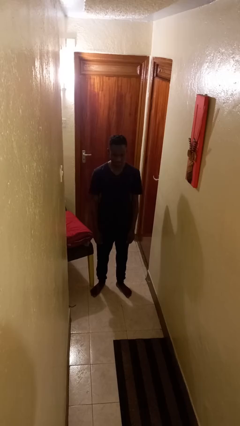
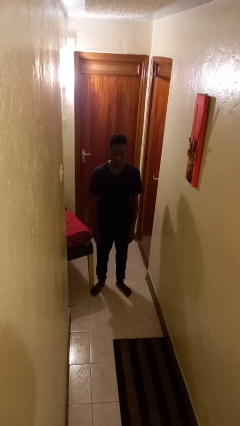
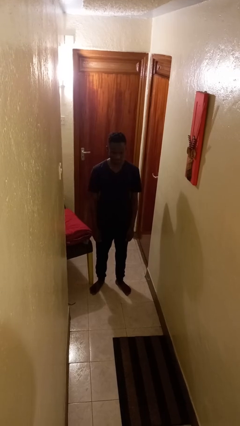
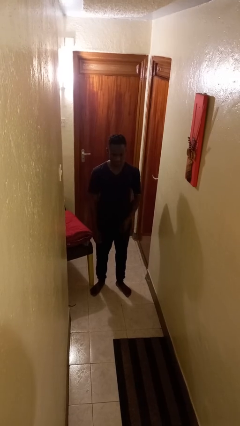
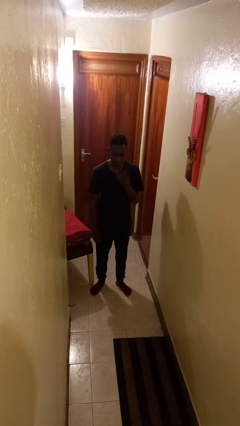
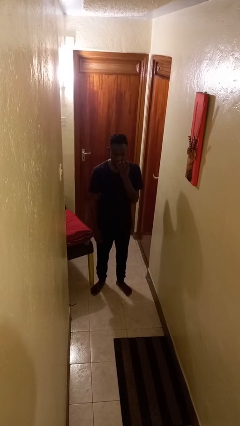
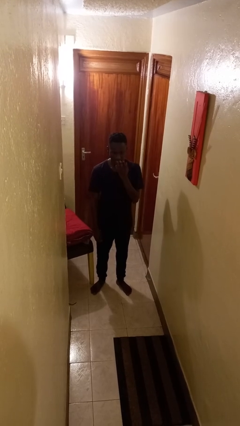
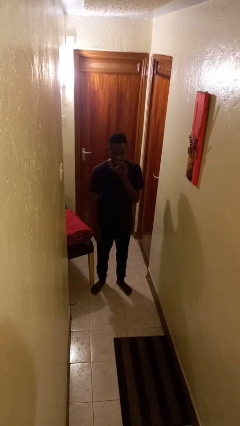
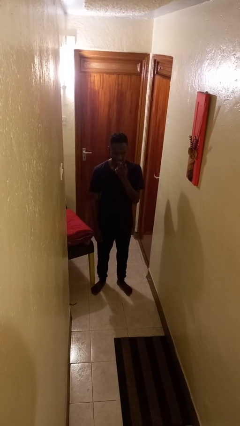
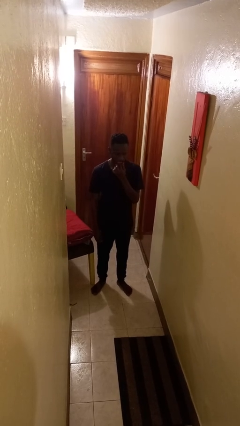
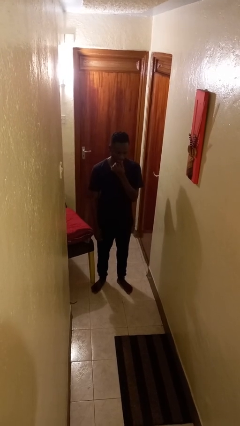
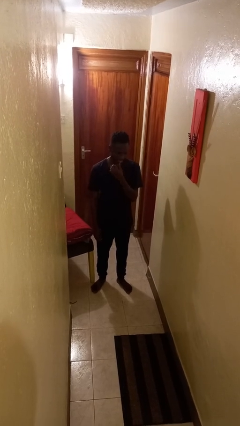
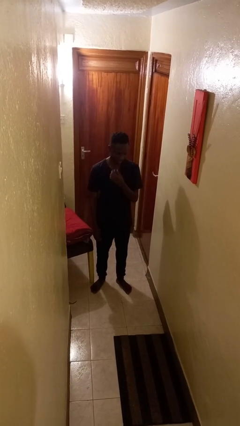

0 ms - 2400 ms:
person licks fingers

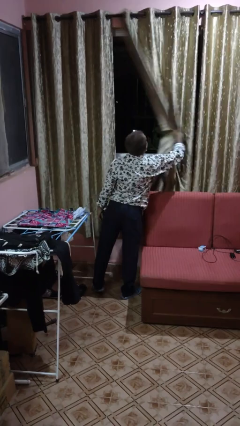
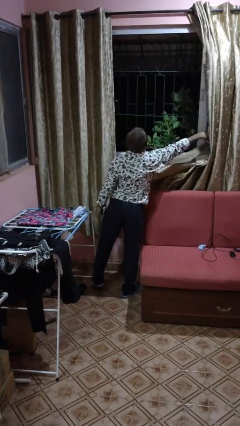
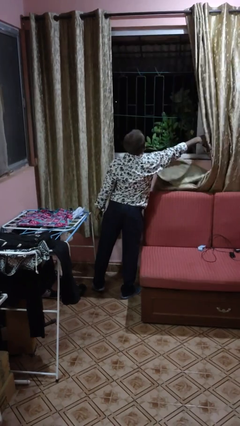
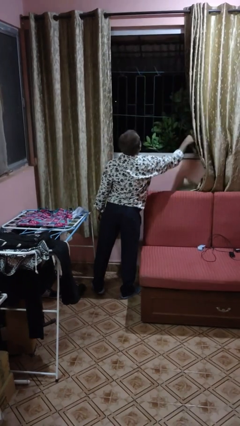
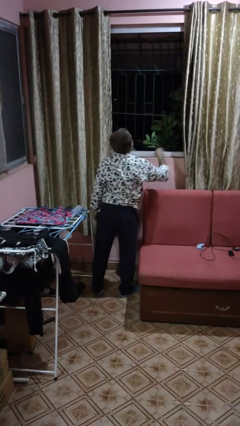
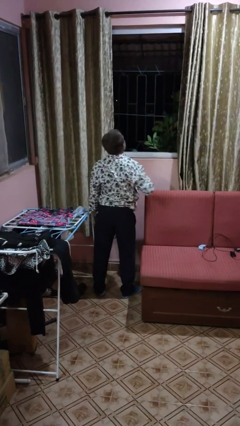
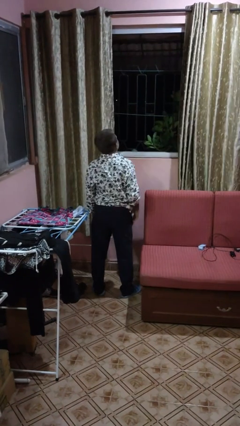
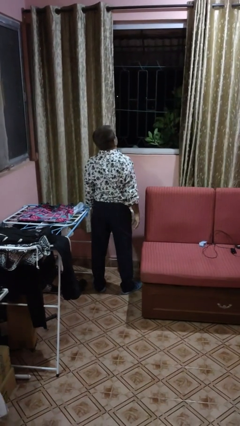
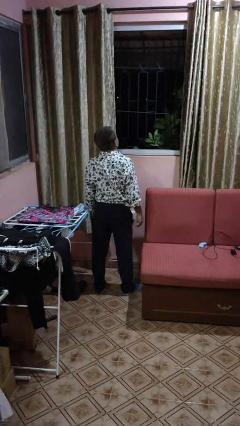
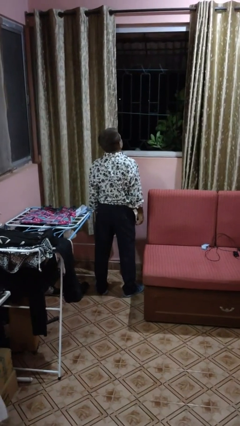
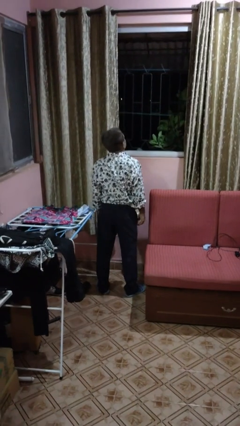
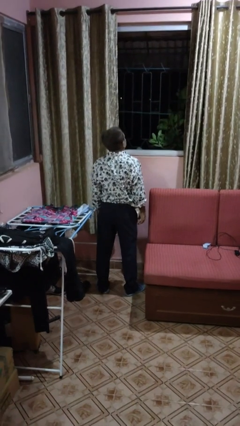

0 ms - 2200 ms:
person opens curtains

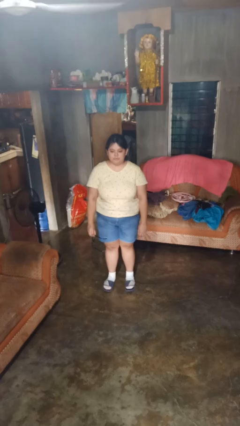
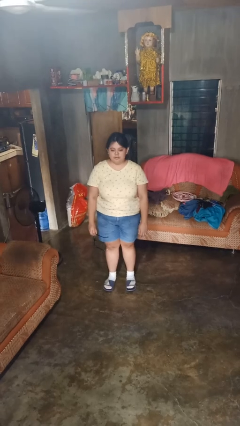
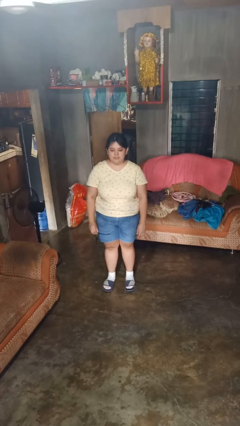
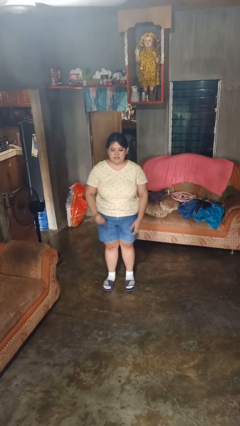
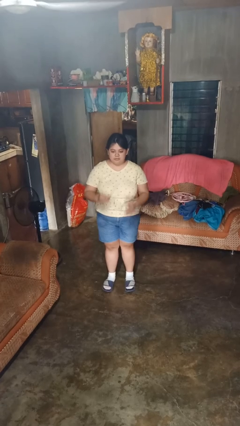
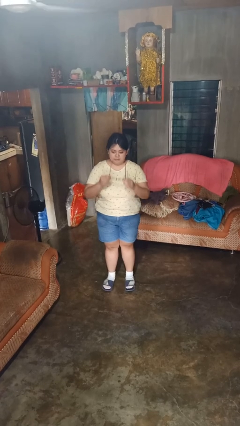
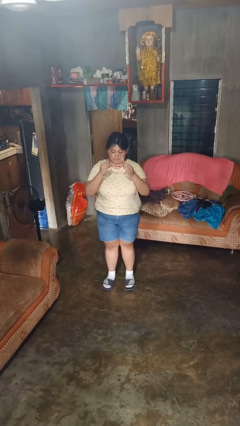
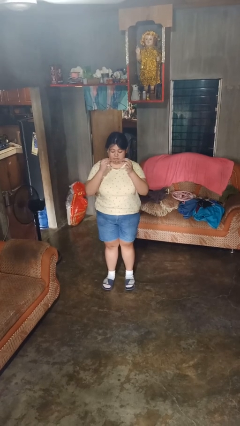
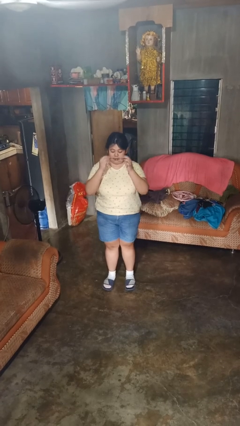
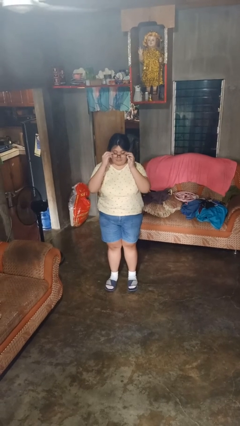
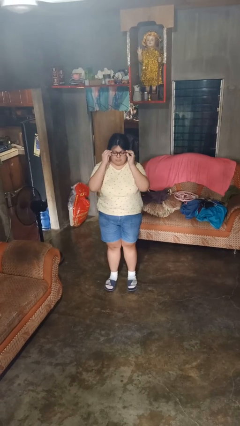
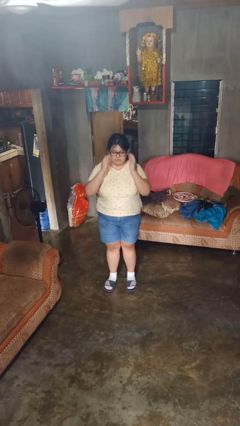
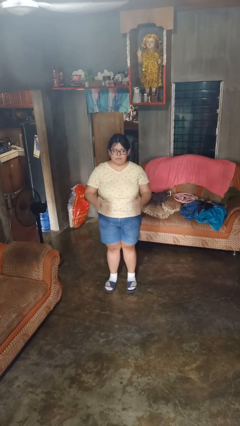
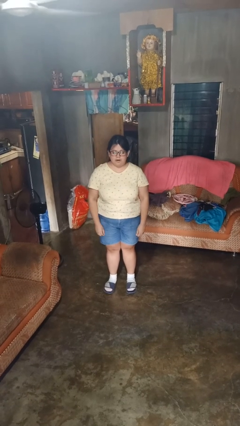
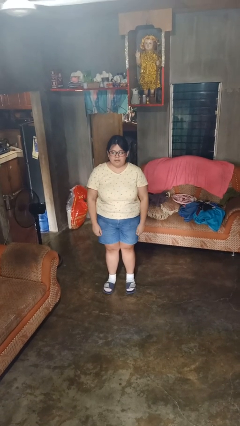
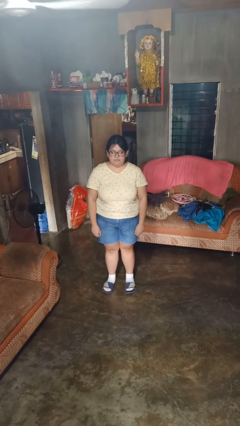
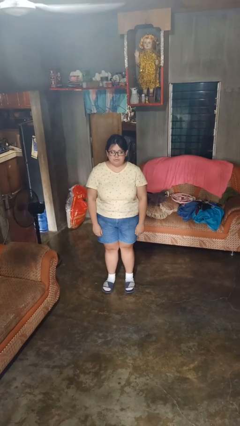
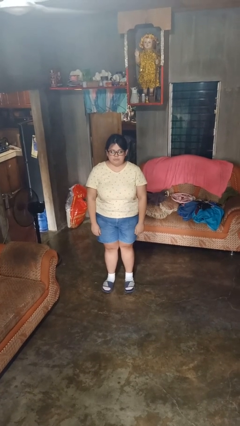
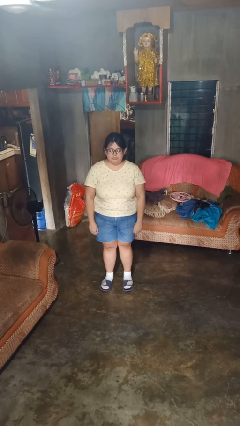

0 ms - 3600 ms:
person puts on glasses

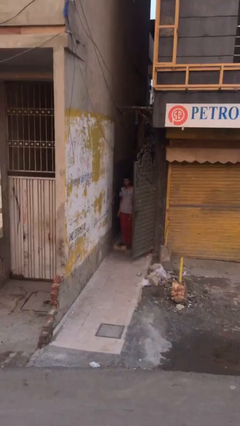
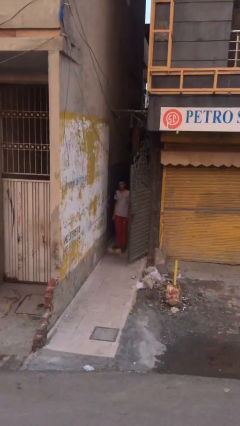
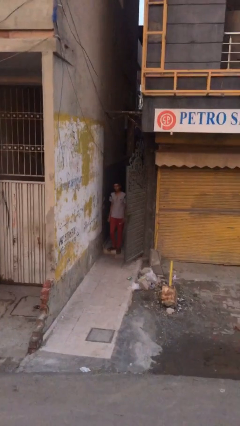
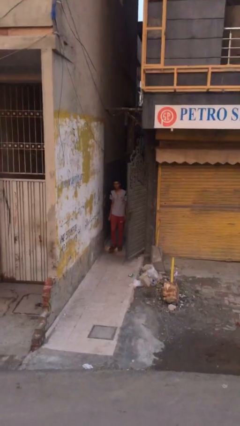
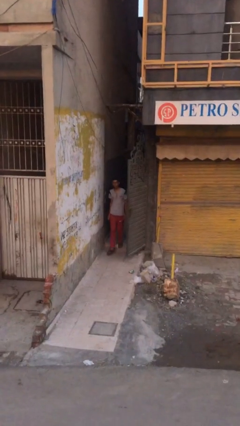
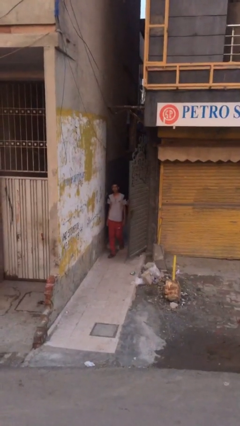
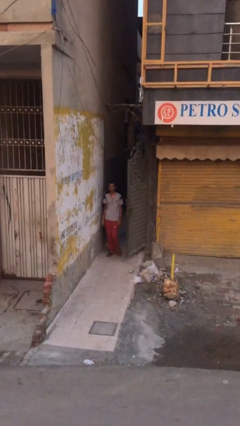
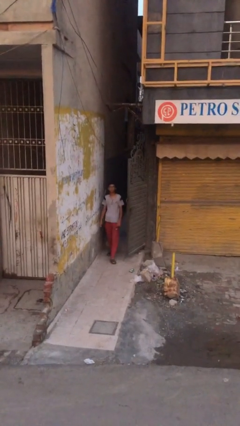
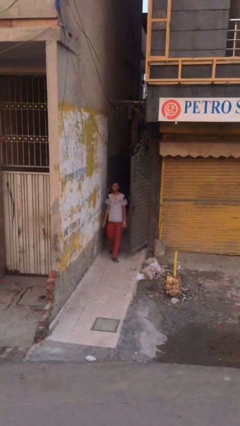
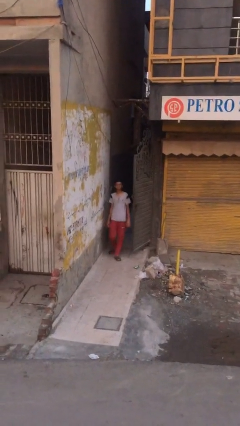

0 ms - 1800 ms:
person enters scene through structure

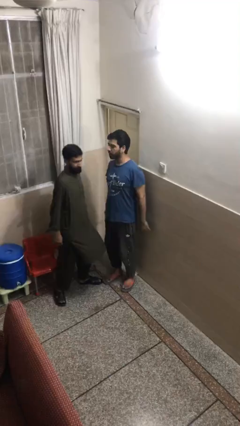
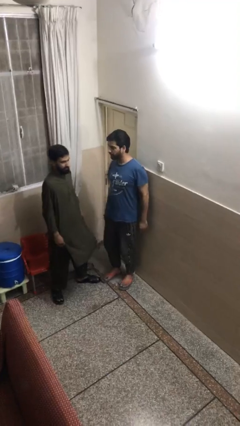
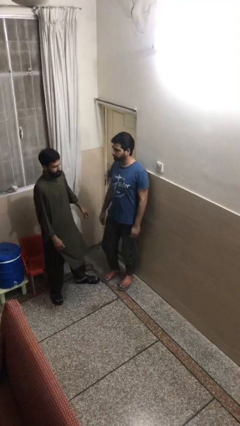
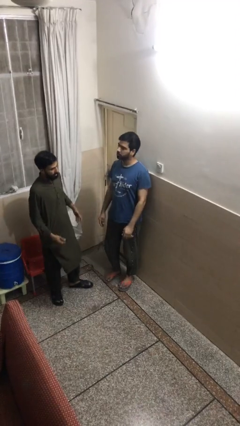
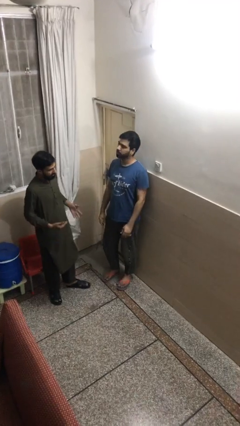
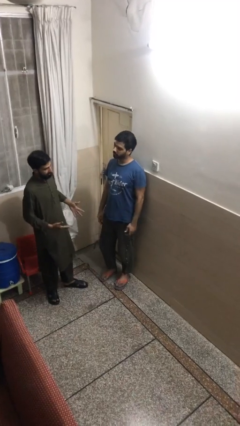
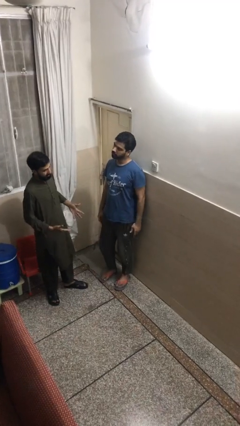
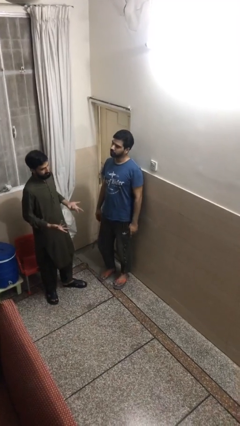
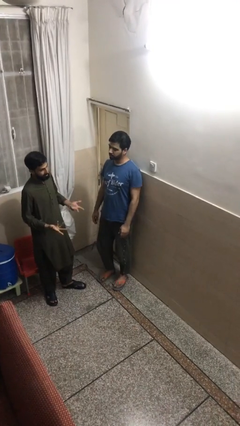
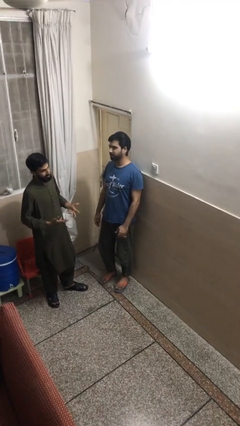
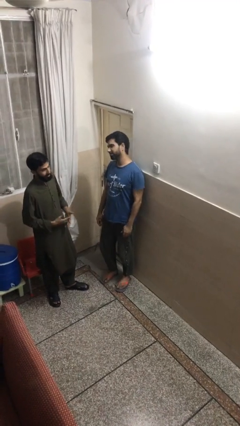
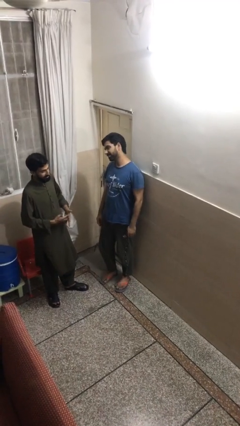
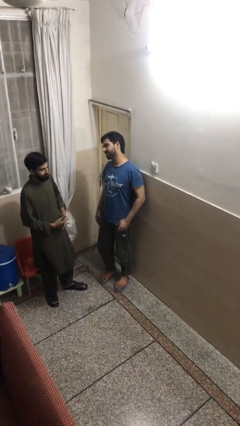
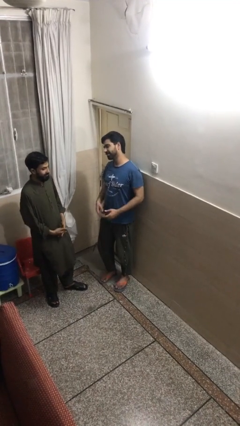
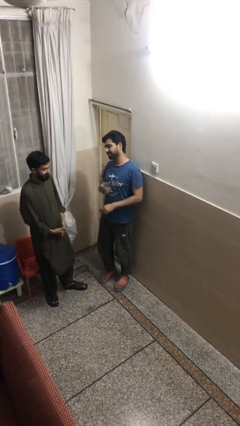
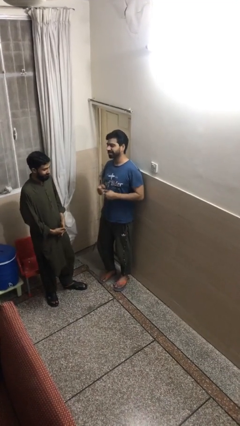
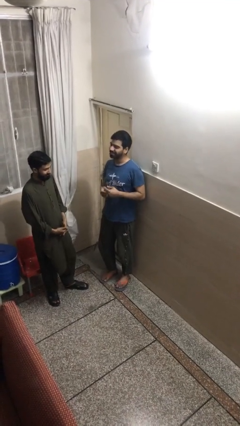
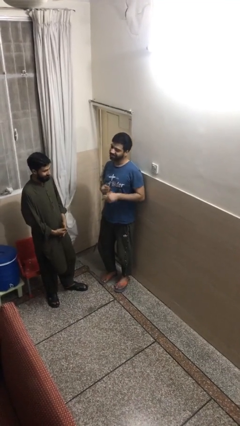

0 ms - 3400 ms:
person talks to person

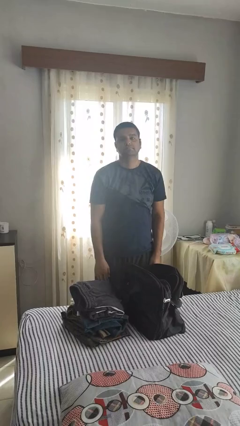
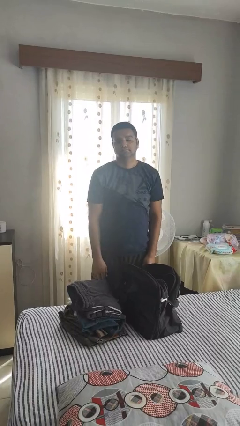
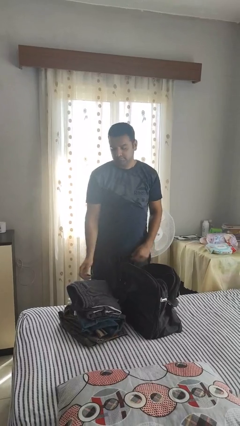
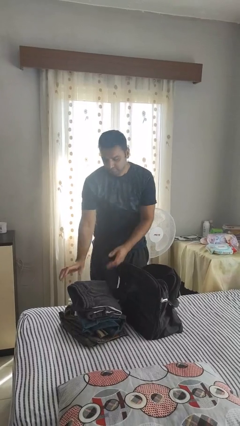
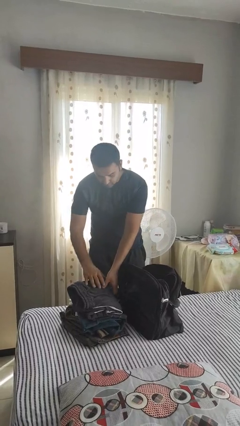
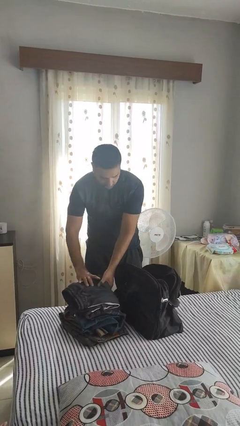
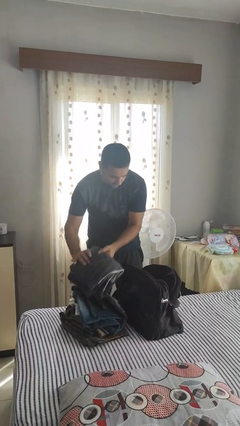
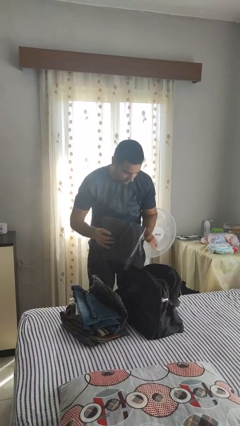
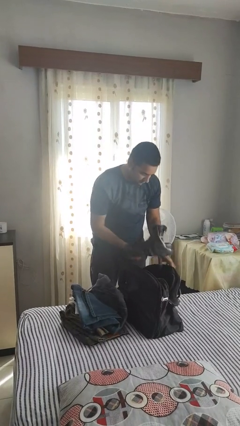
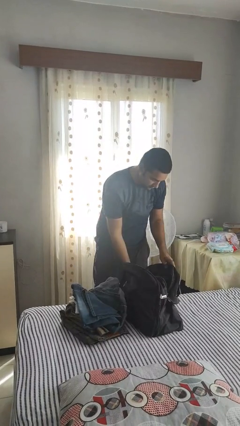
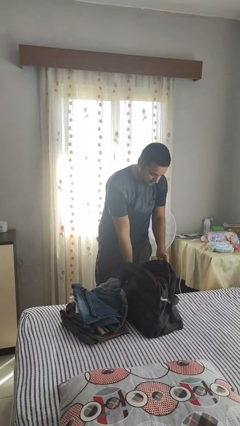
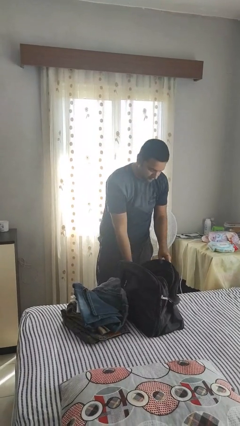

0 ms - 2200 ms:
person loads clothes into suitcase

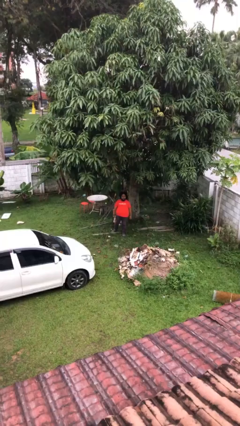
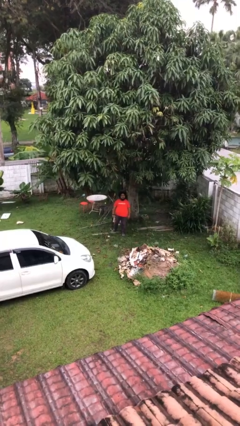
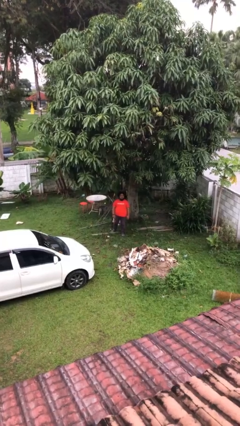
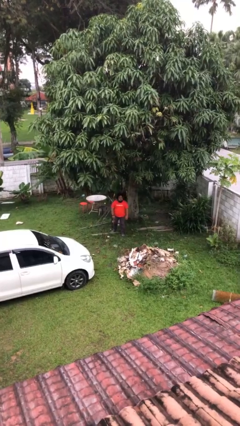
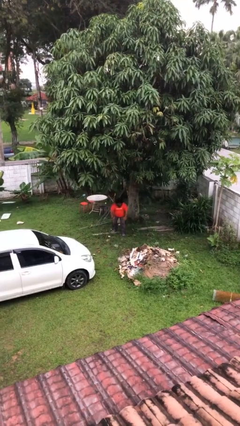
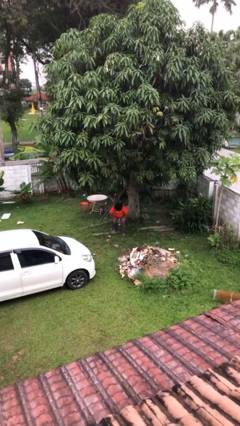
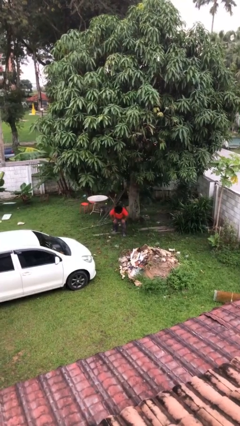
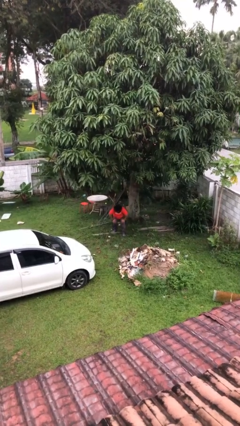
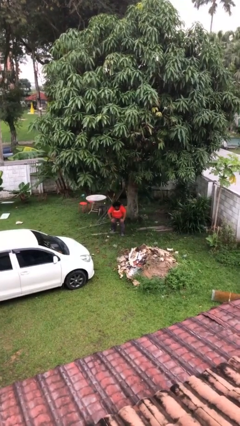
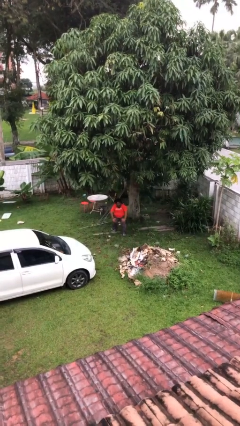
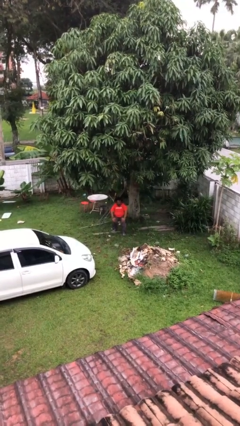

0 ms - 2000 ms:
person sits down
